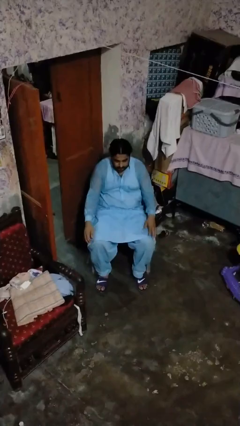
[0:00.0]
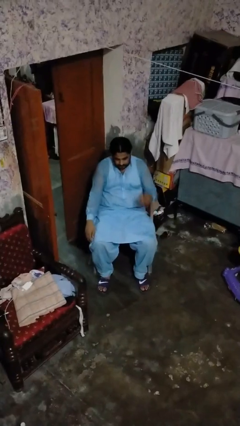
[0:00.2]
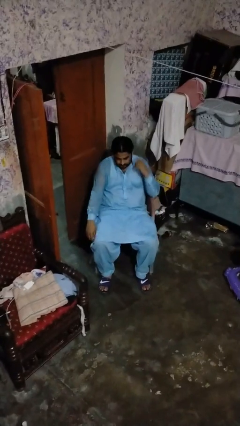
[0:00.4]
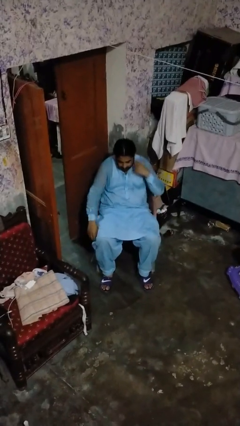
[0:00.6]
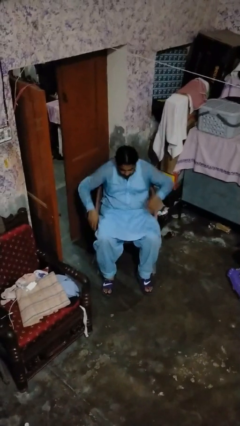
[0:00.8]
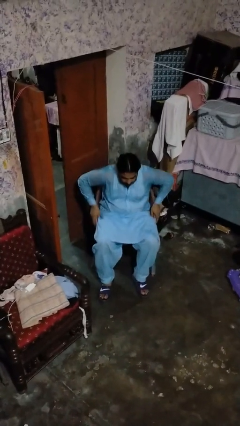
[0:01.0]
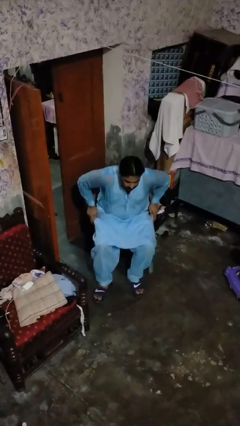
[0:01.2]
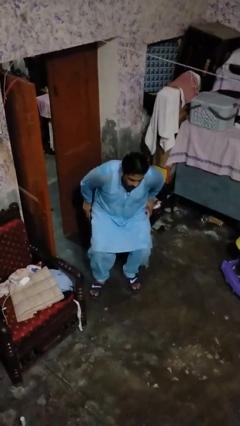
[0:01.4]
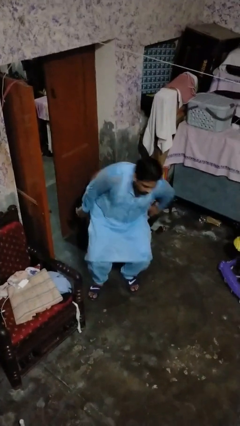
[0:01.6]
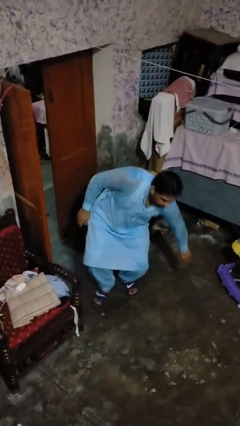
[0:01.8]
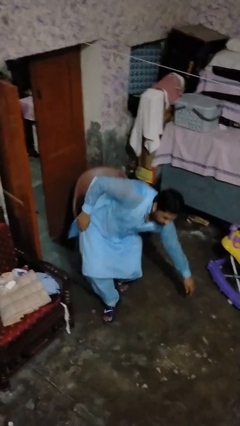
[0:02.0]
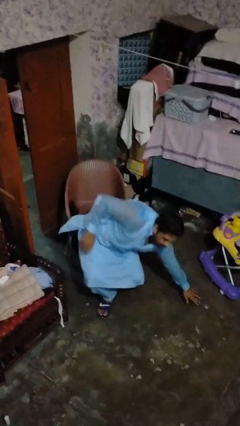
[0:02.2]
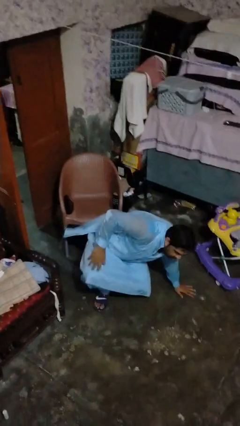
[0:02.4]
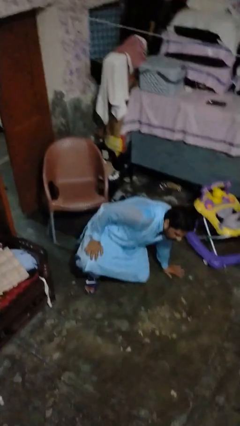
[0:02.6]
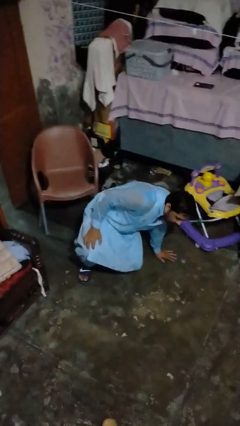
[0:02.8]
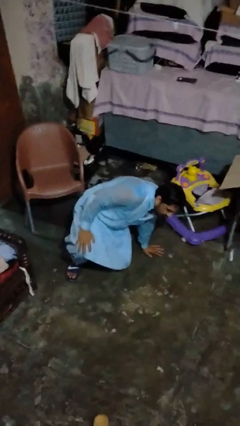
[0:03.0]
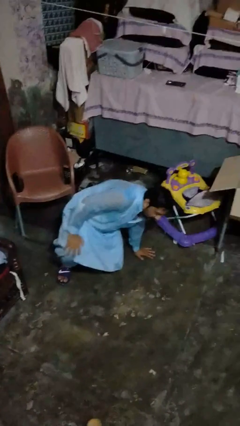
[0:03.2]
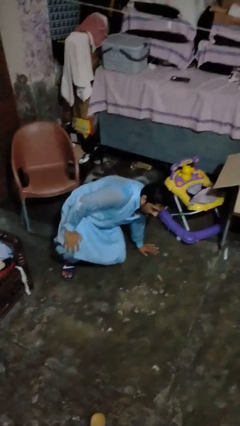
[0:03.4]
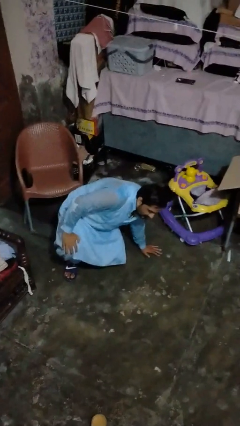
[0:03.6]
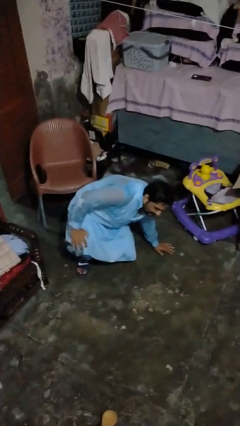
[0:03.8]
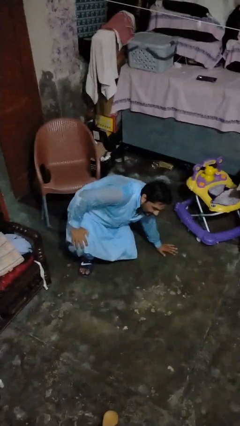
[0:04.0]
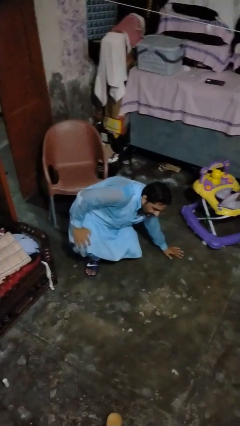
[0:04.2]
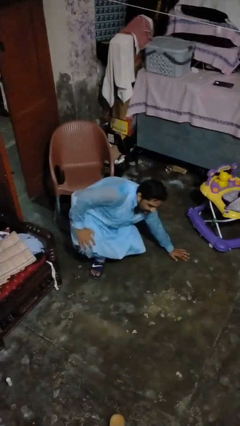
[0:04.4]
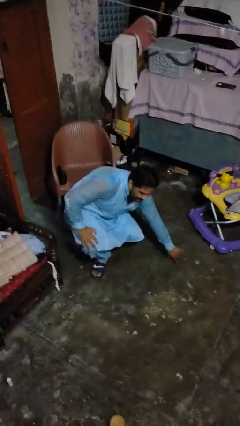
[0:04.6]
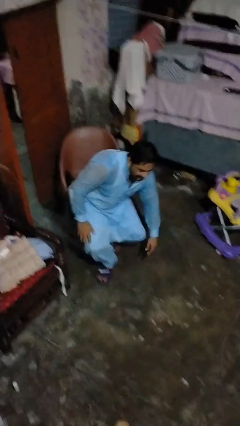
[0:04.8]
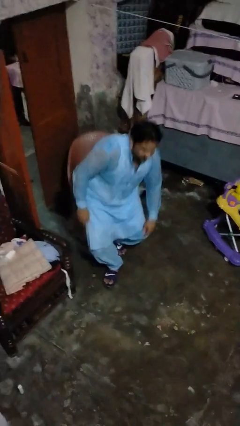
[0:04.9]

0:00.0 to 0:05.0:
person falls from chair

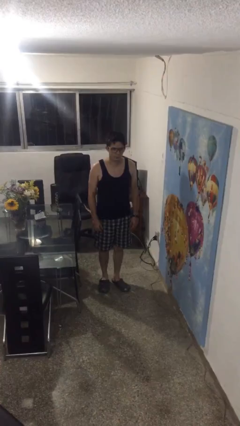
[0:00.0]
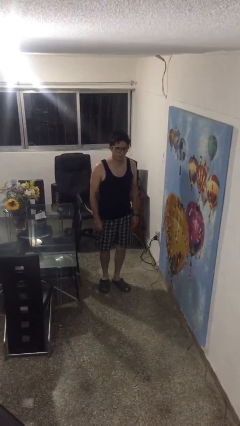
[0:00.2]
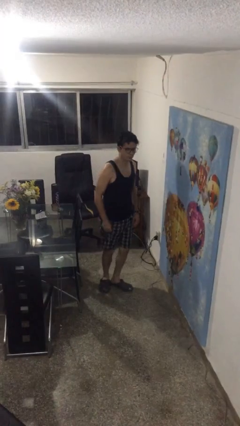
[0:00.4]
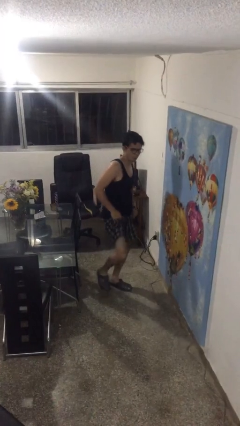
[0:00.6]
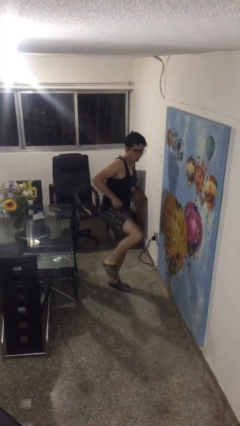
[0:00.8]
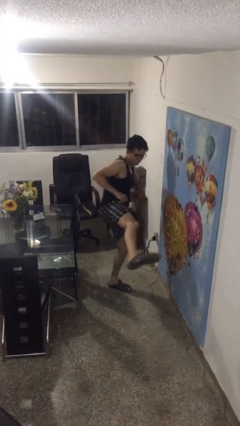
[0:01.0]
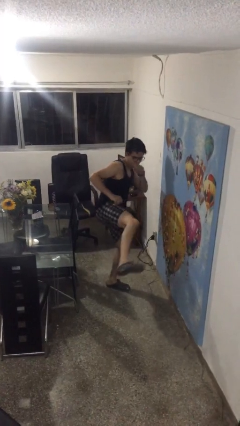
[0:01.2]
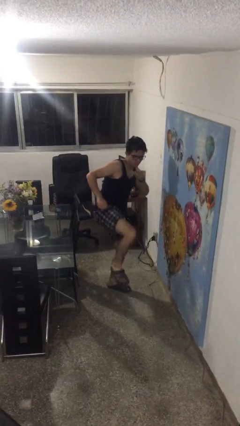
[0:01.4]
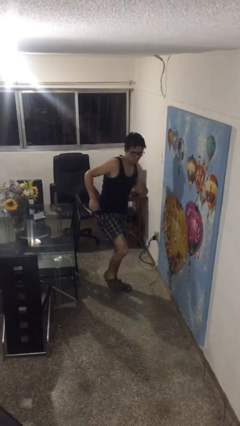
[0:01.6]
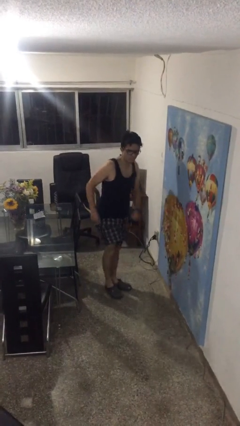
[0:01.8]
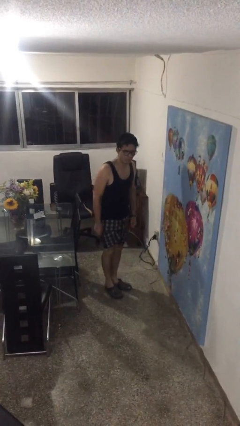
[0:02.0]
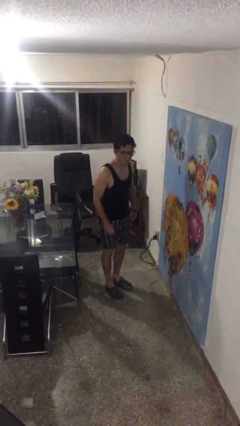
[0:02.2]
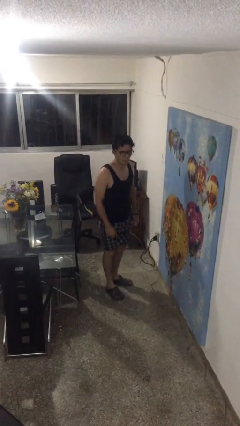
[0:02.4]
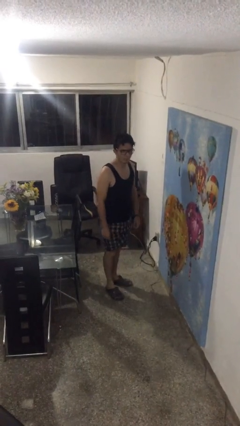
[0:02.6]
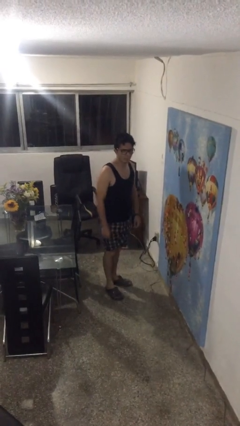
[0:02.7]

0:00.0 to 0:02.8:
person karate kicks

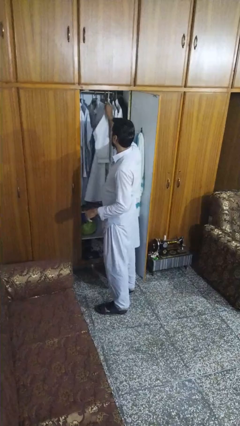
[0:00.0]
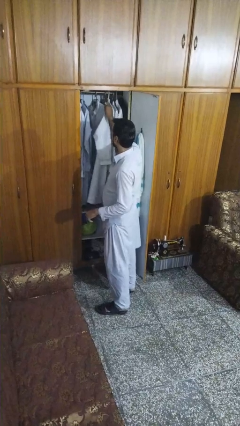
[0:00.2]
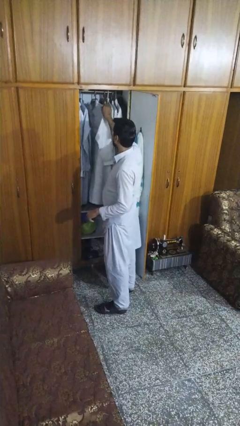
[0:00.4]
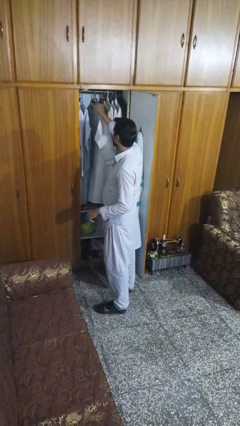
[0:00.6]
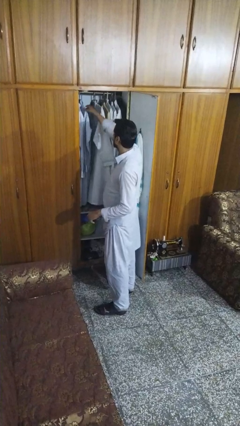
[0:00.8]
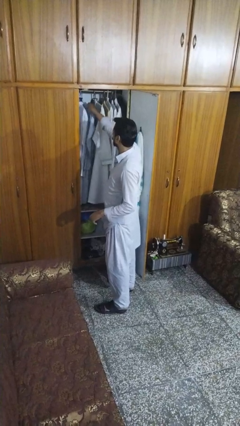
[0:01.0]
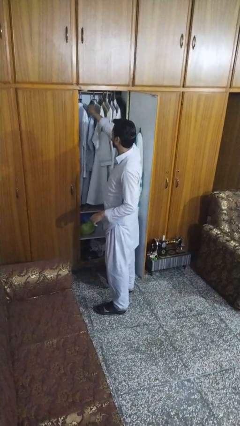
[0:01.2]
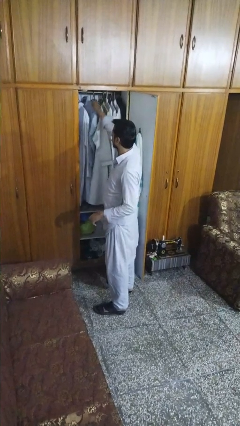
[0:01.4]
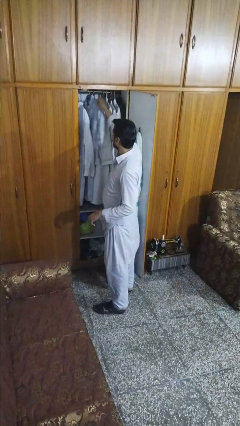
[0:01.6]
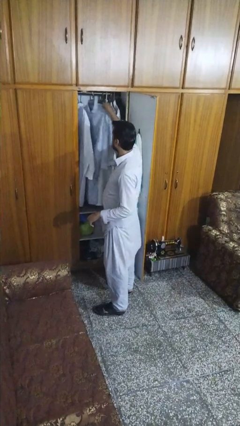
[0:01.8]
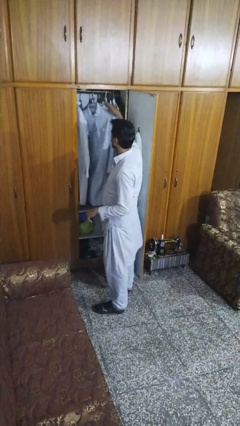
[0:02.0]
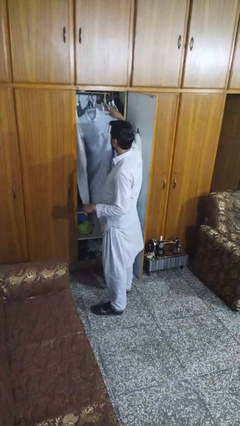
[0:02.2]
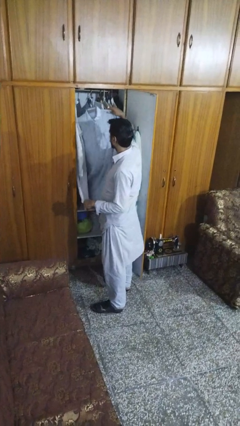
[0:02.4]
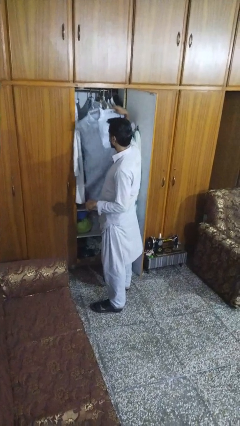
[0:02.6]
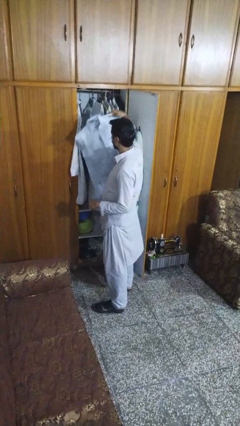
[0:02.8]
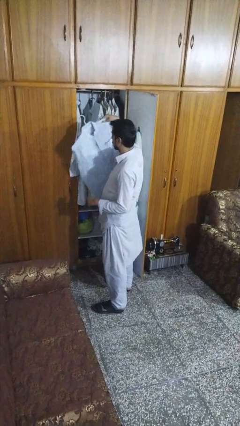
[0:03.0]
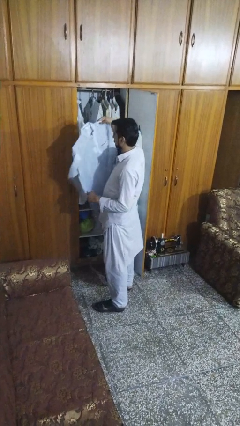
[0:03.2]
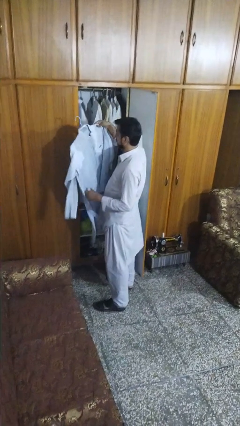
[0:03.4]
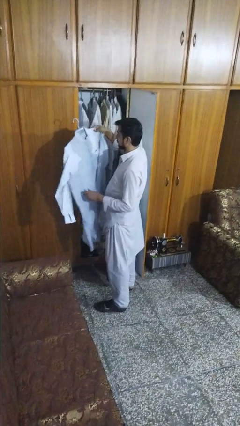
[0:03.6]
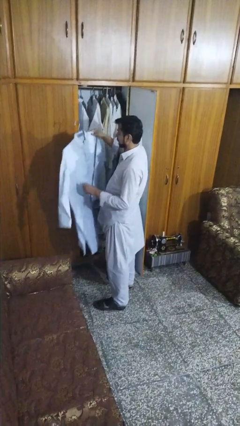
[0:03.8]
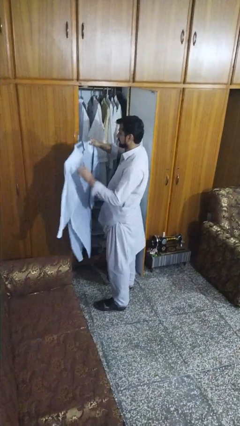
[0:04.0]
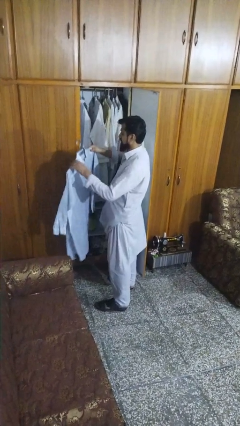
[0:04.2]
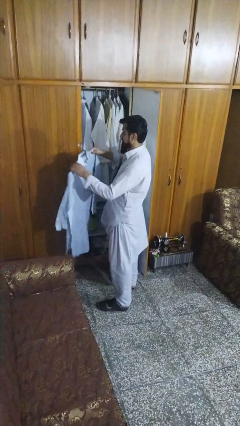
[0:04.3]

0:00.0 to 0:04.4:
person takes clothes from dresser

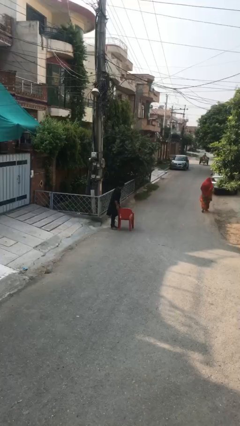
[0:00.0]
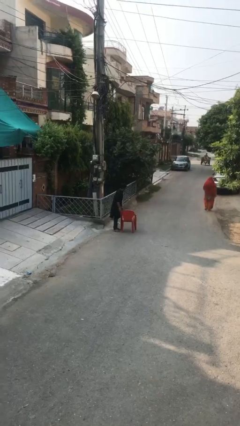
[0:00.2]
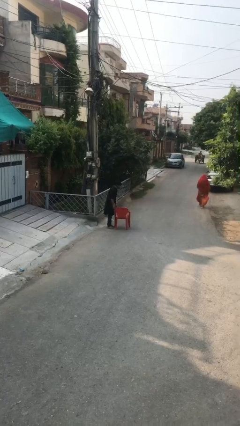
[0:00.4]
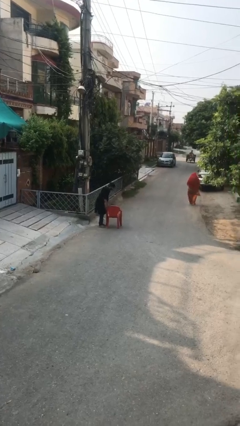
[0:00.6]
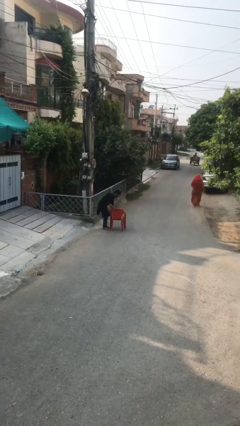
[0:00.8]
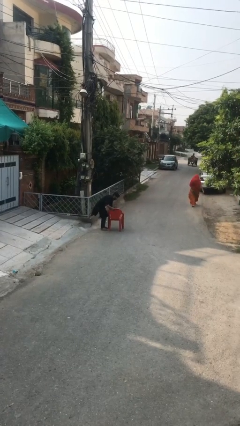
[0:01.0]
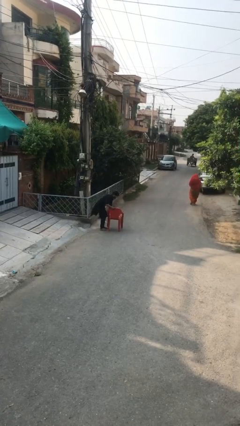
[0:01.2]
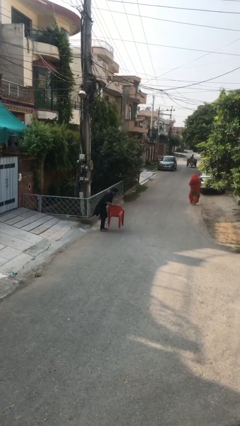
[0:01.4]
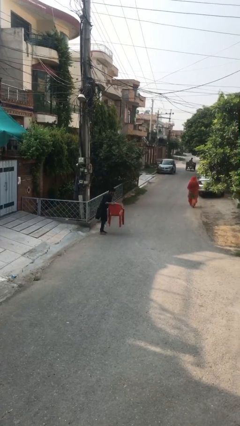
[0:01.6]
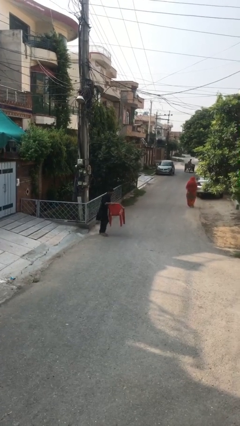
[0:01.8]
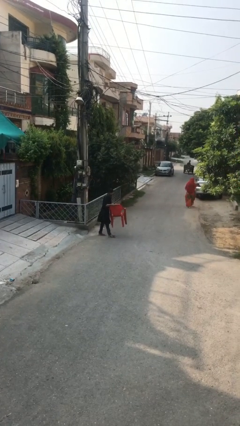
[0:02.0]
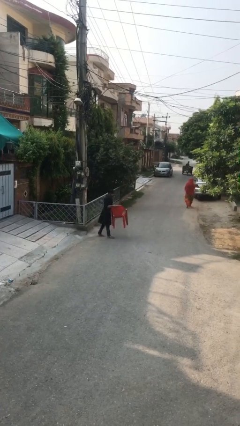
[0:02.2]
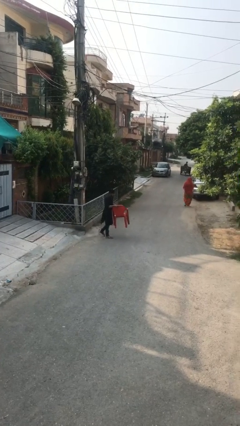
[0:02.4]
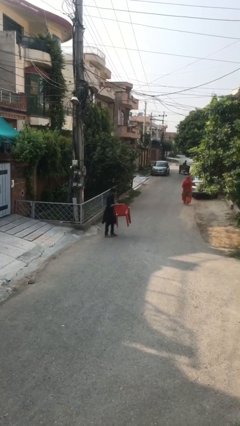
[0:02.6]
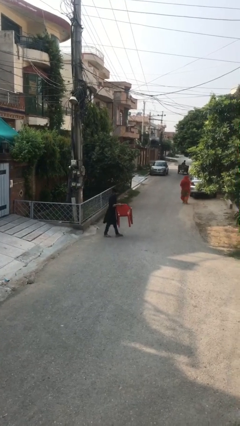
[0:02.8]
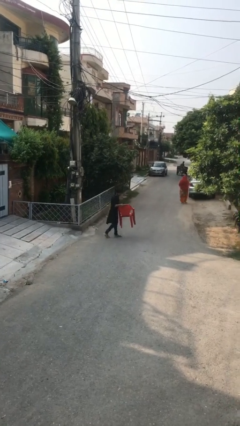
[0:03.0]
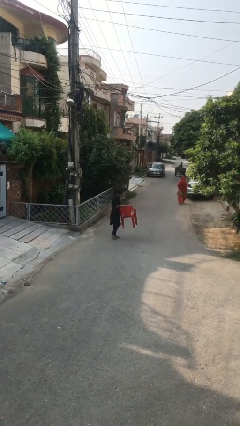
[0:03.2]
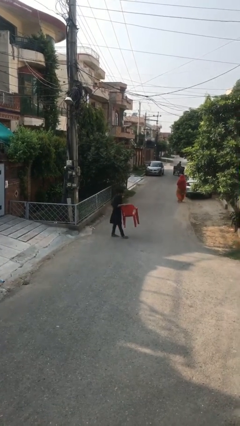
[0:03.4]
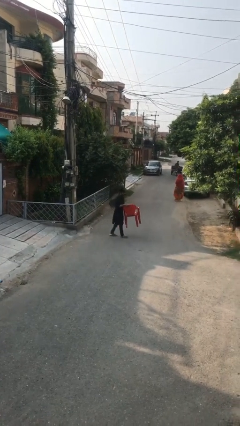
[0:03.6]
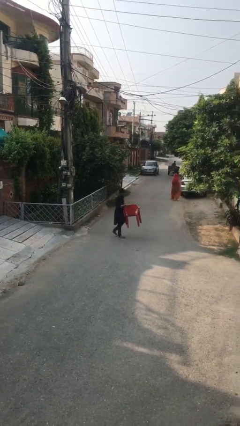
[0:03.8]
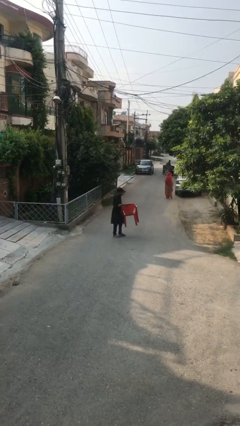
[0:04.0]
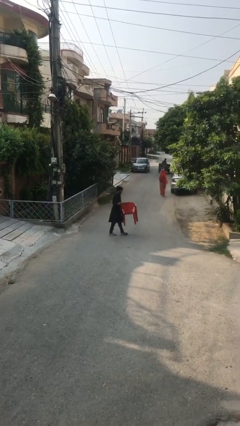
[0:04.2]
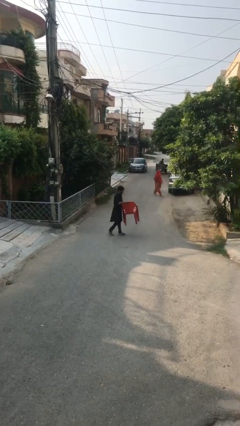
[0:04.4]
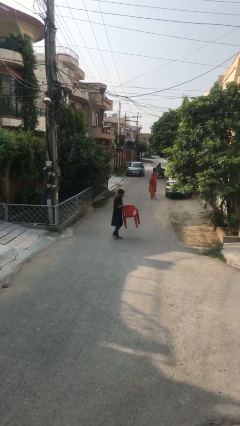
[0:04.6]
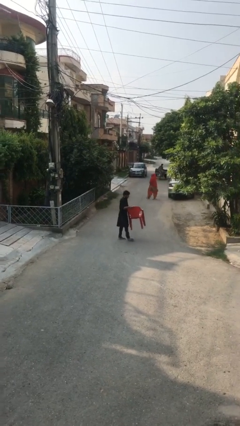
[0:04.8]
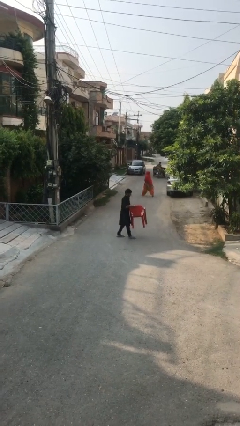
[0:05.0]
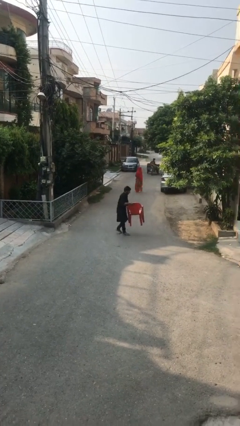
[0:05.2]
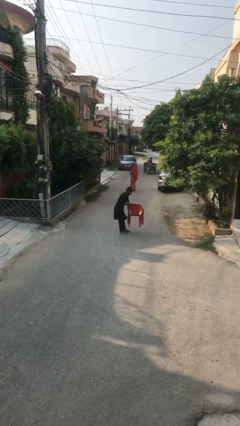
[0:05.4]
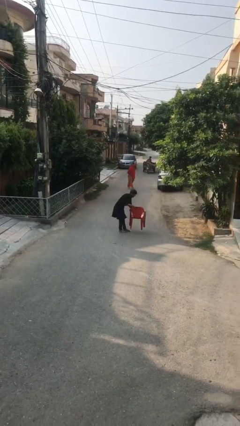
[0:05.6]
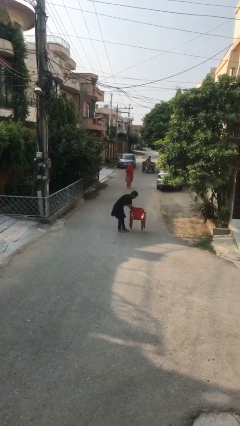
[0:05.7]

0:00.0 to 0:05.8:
person carries heavy object

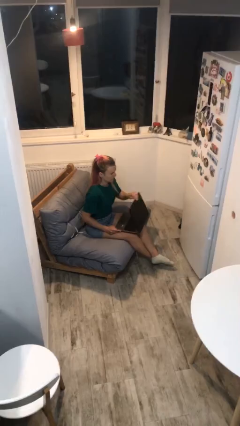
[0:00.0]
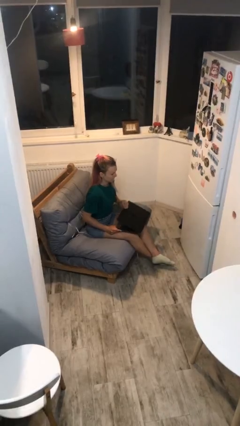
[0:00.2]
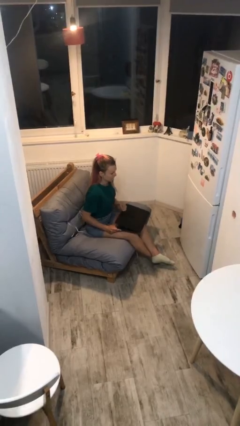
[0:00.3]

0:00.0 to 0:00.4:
person closes laptop
